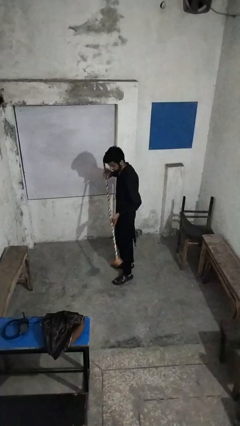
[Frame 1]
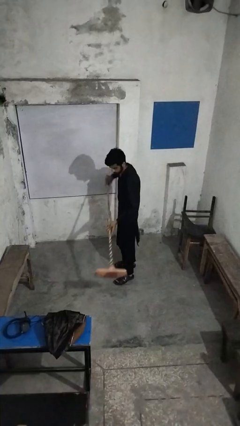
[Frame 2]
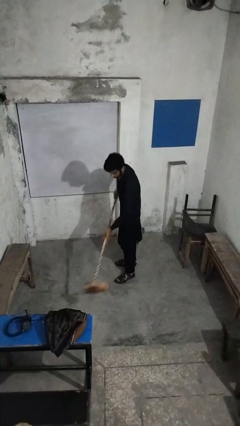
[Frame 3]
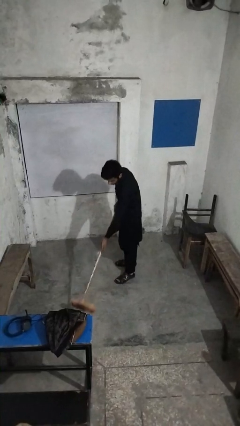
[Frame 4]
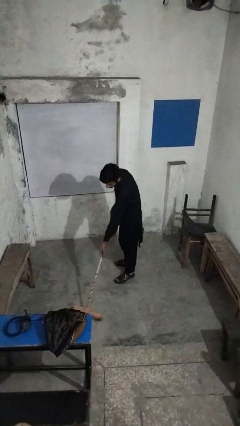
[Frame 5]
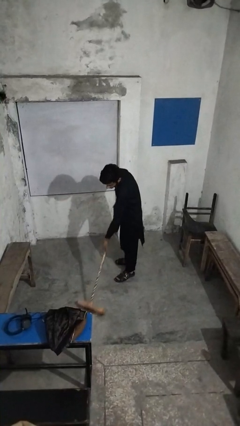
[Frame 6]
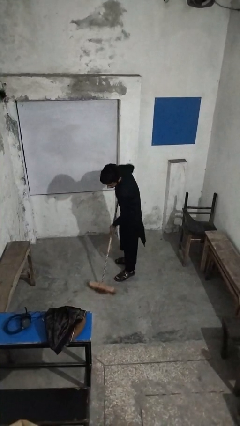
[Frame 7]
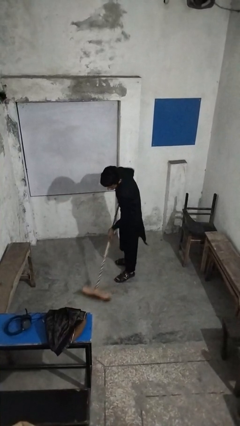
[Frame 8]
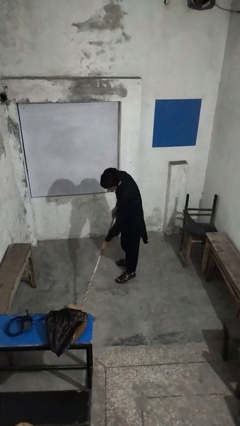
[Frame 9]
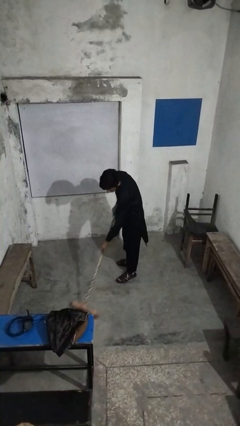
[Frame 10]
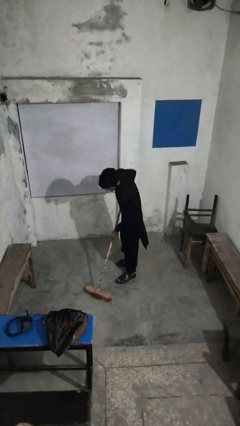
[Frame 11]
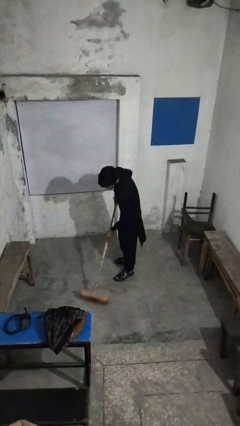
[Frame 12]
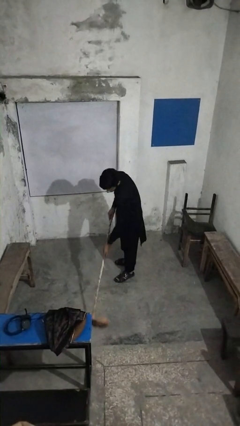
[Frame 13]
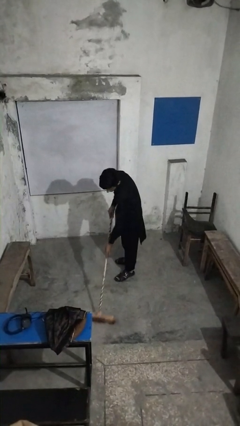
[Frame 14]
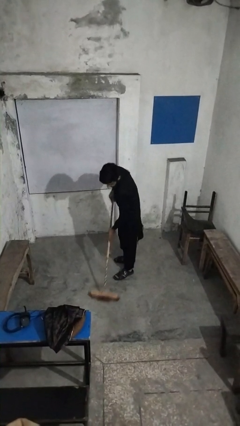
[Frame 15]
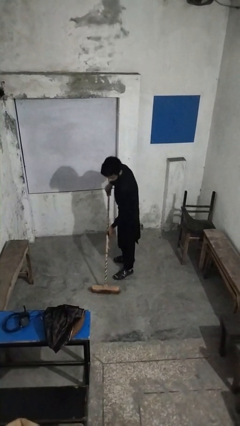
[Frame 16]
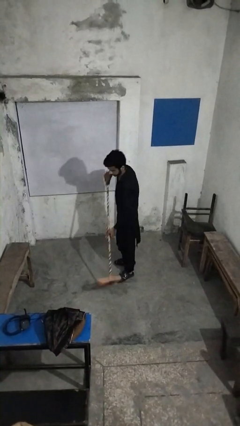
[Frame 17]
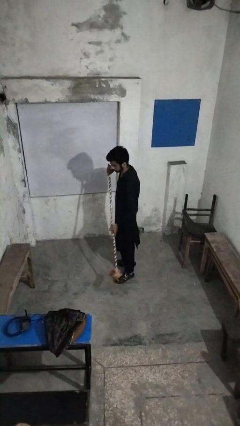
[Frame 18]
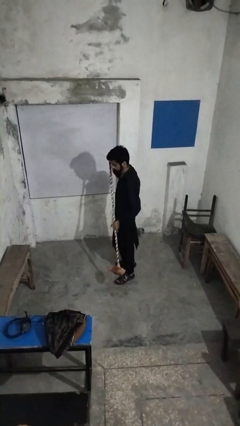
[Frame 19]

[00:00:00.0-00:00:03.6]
person sweeps floor

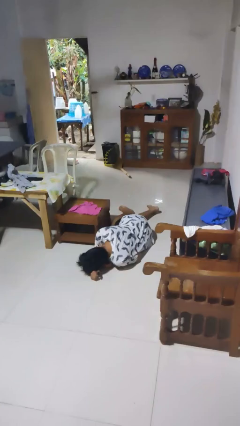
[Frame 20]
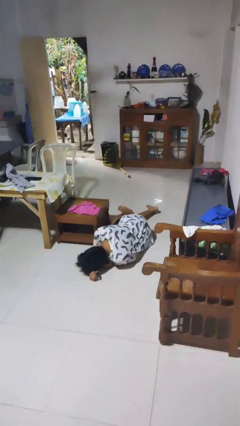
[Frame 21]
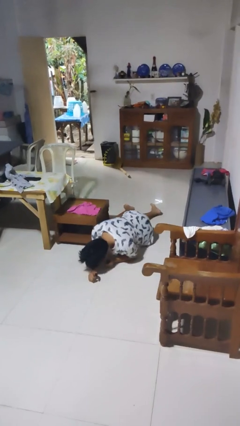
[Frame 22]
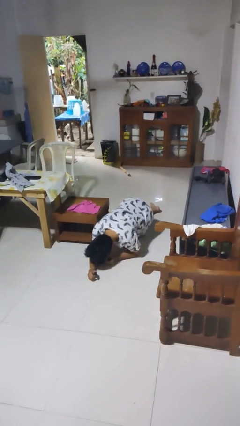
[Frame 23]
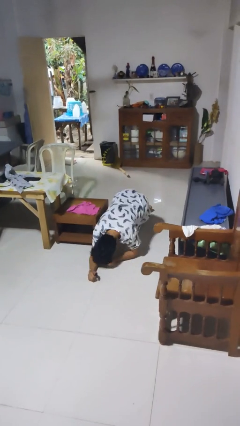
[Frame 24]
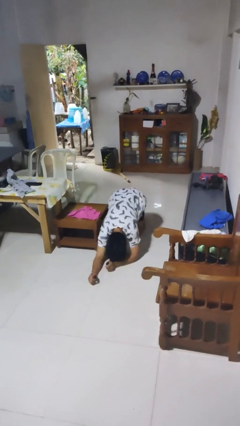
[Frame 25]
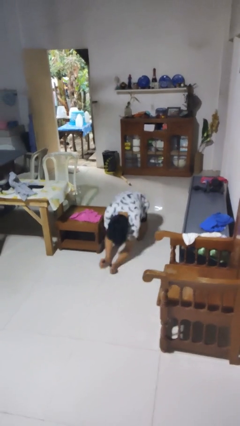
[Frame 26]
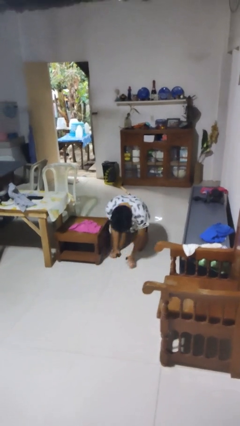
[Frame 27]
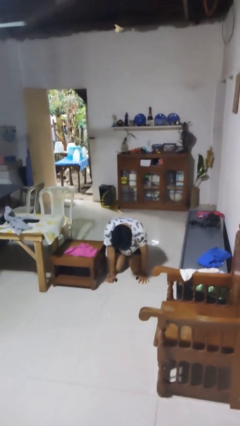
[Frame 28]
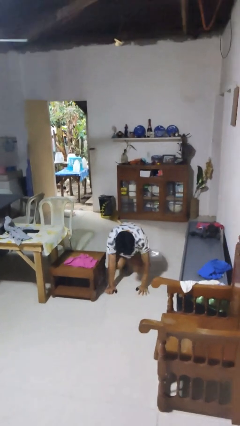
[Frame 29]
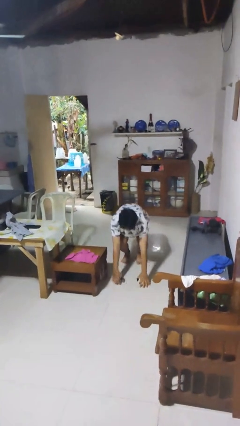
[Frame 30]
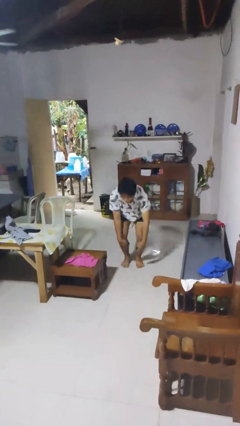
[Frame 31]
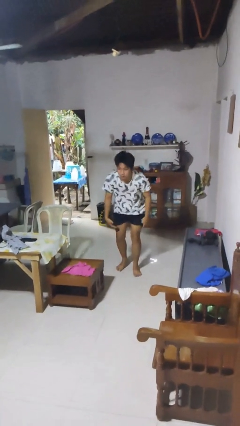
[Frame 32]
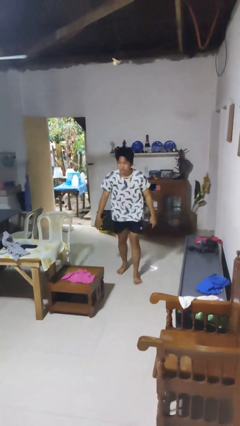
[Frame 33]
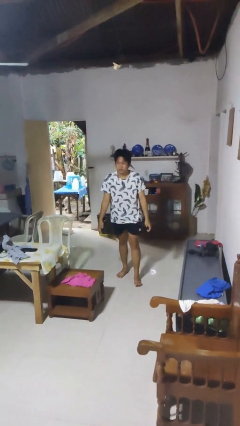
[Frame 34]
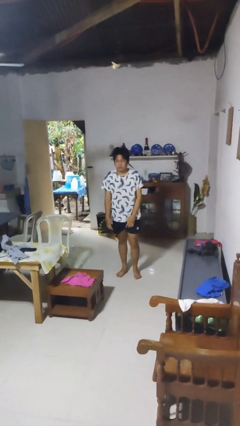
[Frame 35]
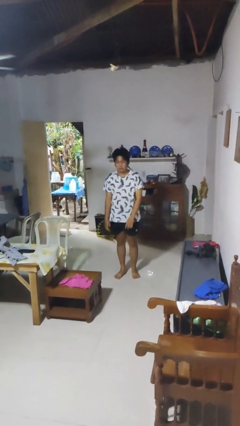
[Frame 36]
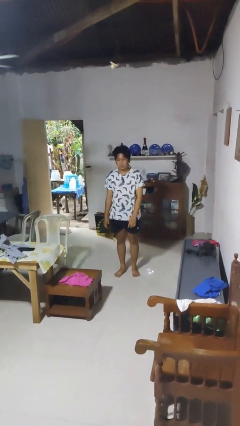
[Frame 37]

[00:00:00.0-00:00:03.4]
person stands up from floor

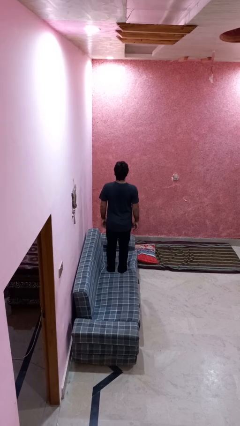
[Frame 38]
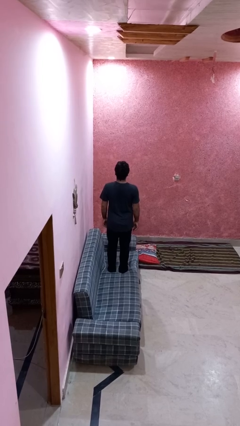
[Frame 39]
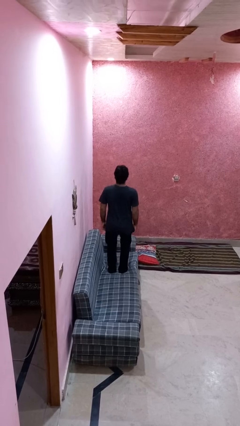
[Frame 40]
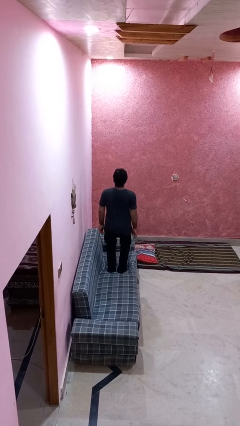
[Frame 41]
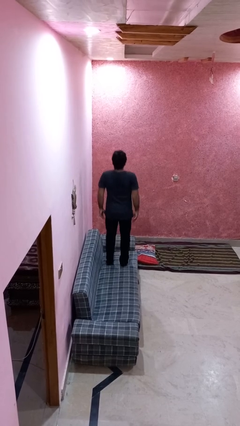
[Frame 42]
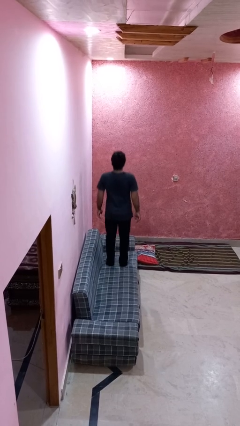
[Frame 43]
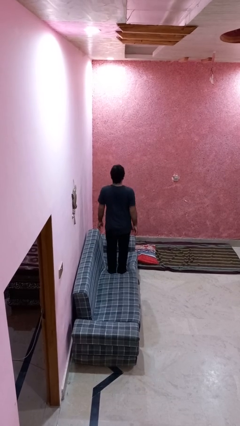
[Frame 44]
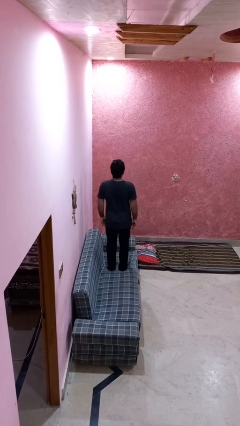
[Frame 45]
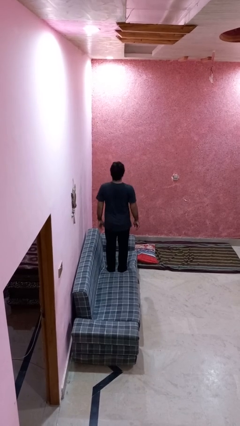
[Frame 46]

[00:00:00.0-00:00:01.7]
person jumps on couch

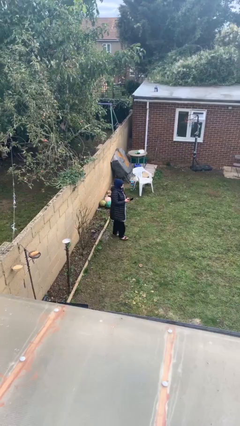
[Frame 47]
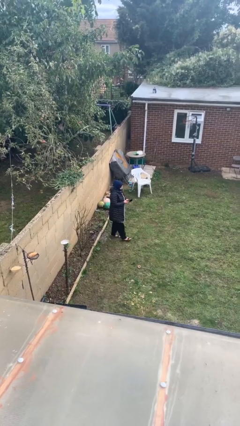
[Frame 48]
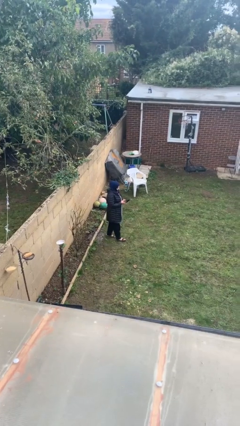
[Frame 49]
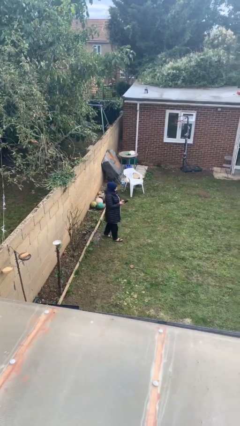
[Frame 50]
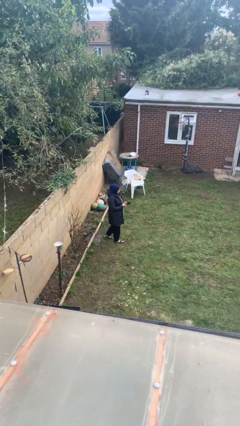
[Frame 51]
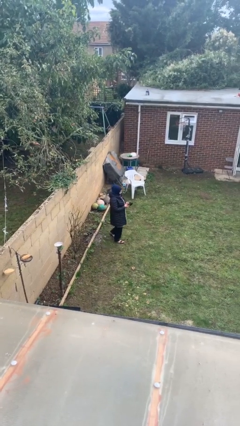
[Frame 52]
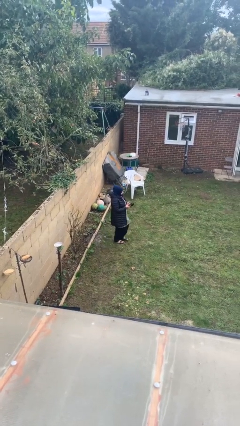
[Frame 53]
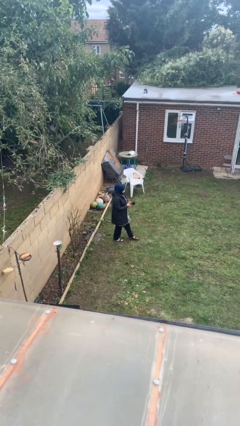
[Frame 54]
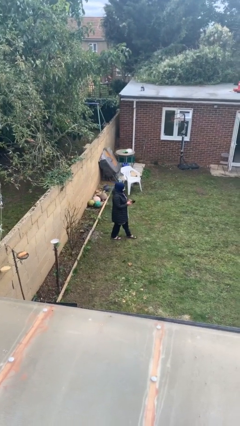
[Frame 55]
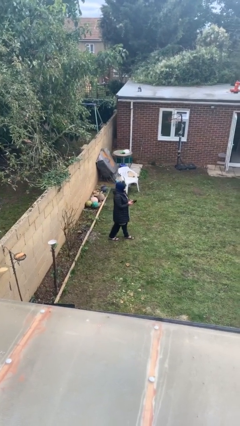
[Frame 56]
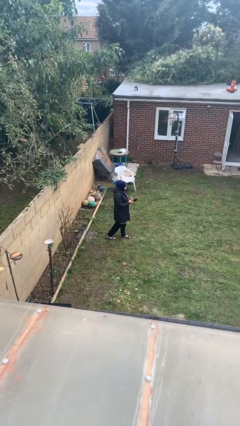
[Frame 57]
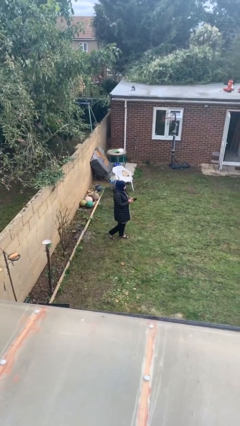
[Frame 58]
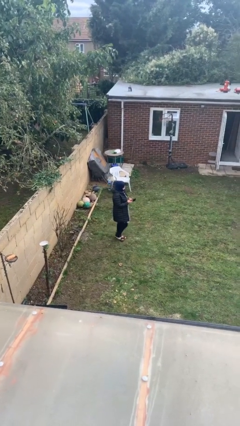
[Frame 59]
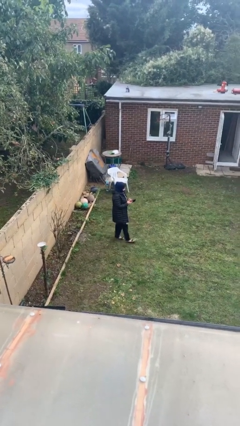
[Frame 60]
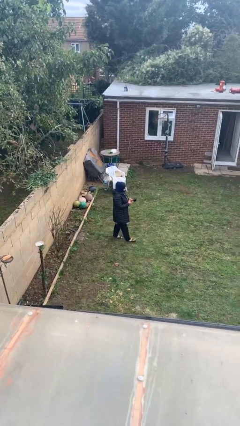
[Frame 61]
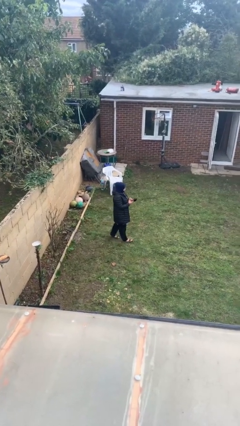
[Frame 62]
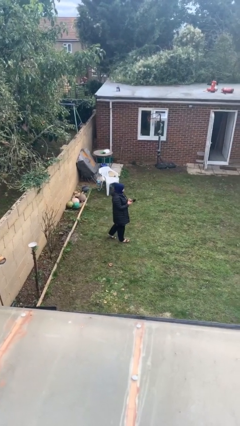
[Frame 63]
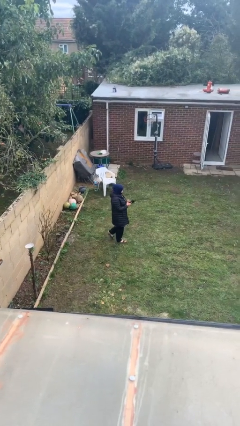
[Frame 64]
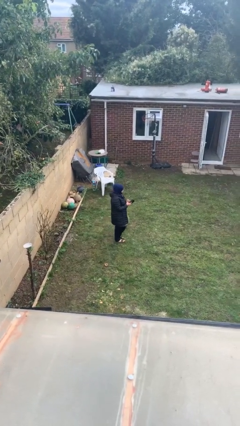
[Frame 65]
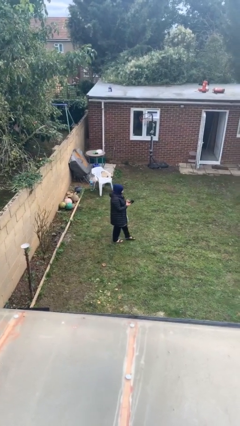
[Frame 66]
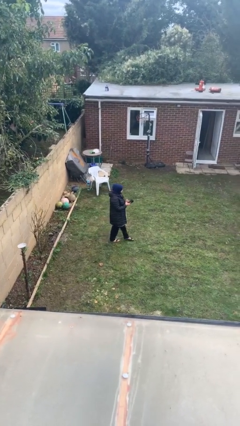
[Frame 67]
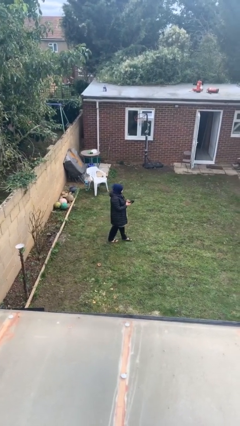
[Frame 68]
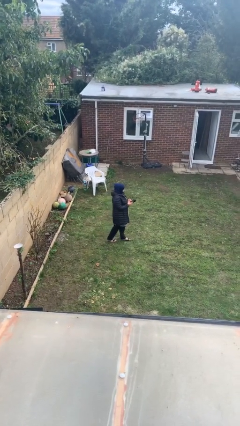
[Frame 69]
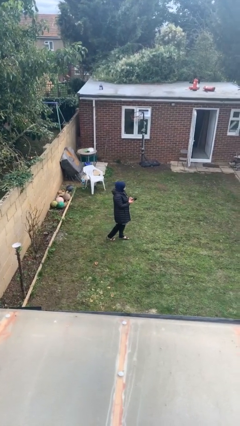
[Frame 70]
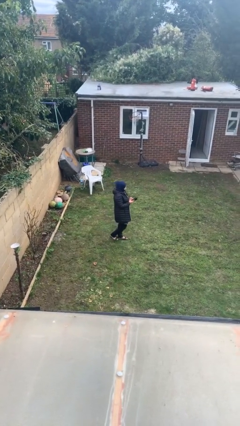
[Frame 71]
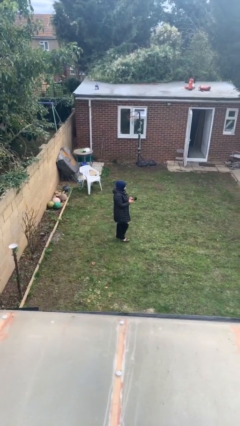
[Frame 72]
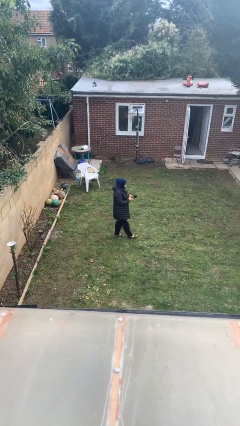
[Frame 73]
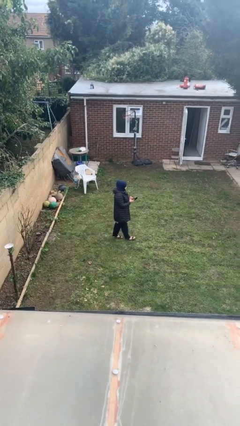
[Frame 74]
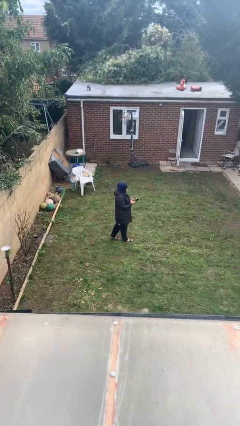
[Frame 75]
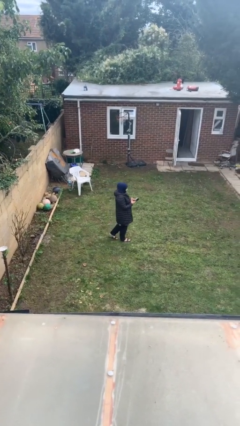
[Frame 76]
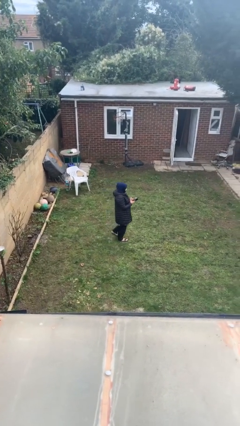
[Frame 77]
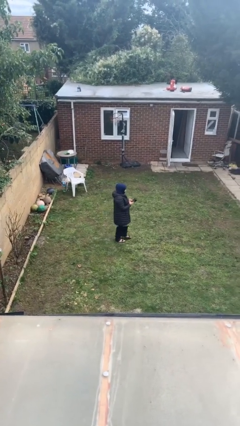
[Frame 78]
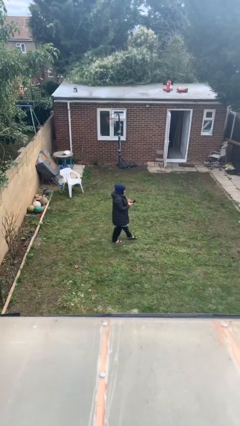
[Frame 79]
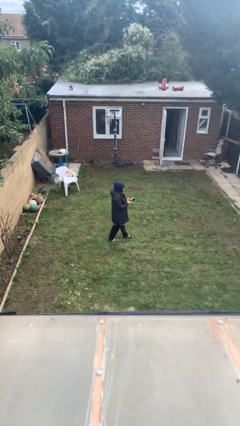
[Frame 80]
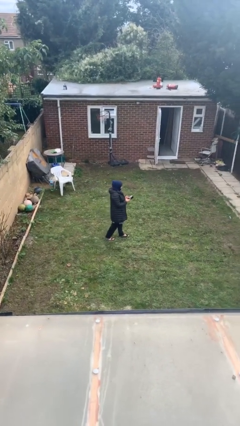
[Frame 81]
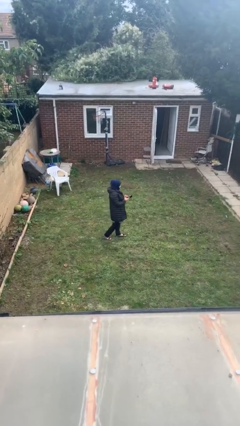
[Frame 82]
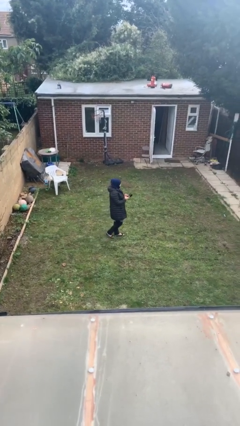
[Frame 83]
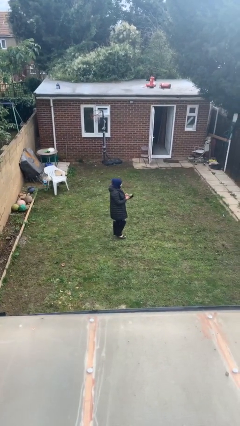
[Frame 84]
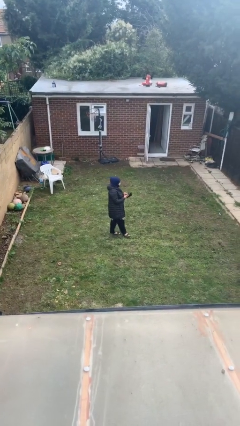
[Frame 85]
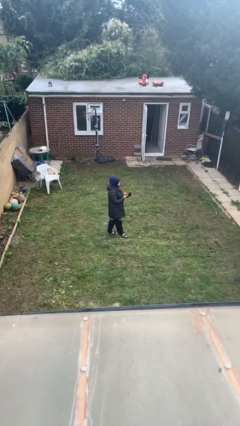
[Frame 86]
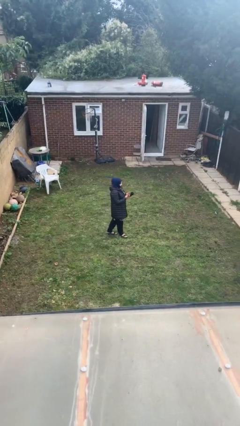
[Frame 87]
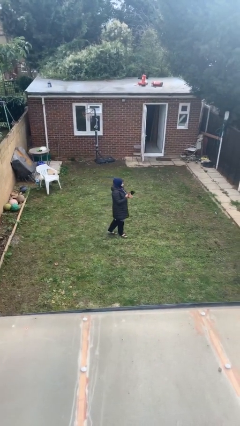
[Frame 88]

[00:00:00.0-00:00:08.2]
person texts on phone

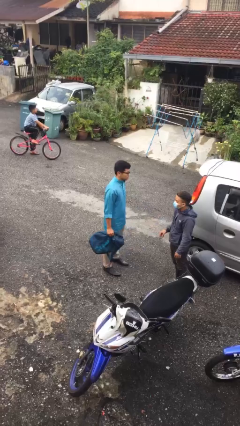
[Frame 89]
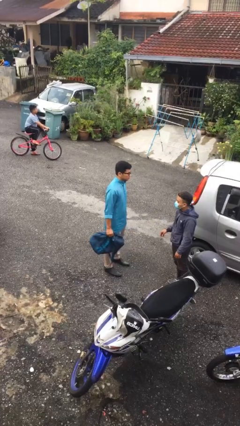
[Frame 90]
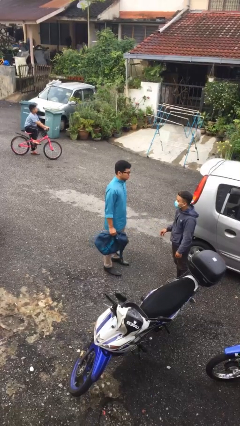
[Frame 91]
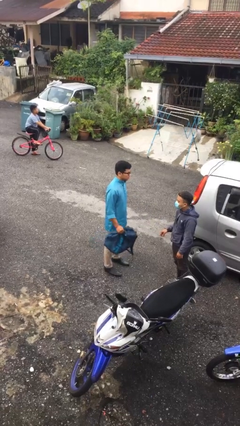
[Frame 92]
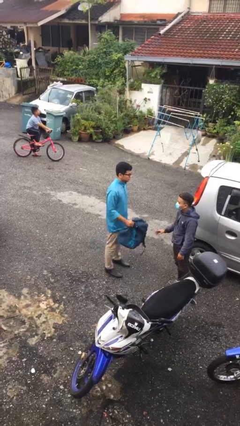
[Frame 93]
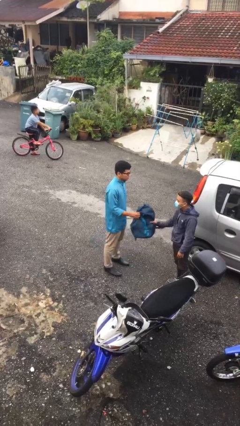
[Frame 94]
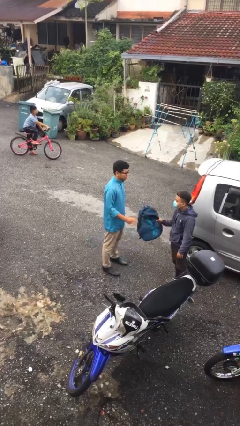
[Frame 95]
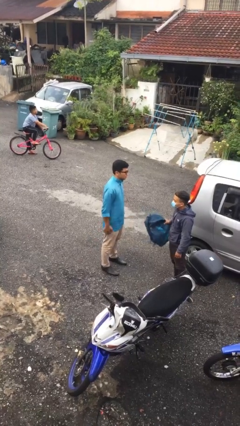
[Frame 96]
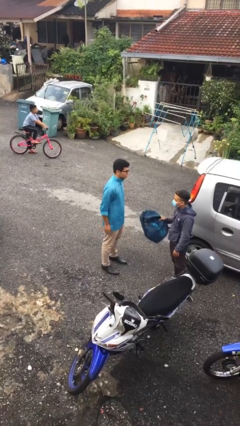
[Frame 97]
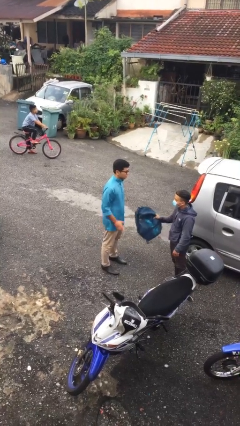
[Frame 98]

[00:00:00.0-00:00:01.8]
person transfers object to person
